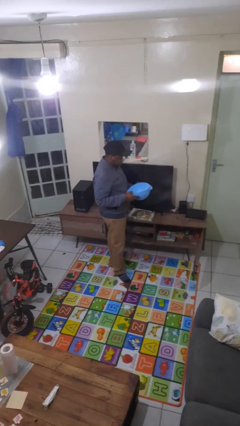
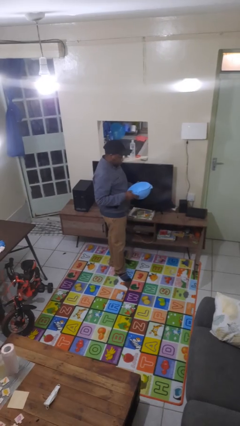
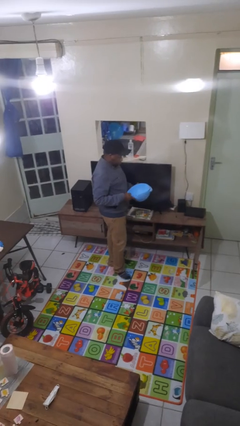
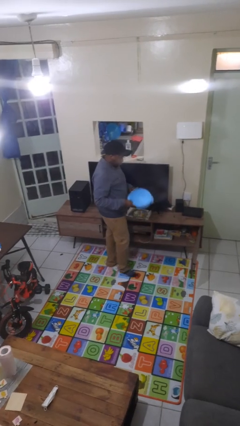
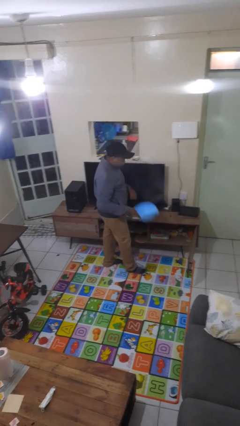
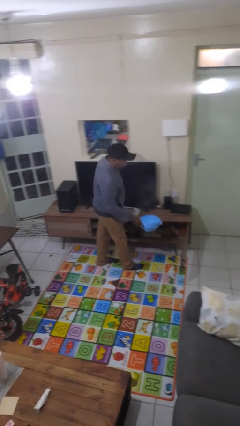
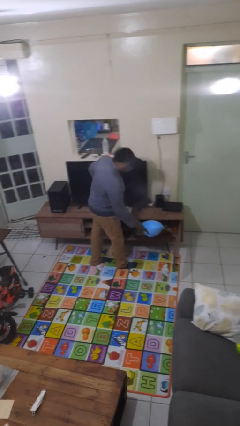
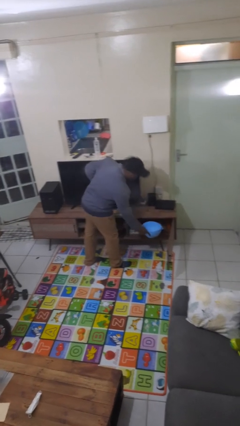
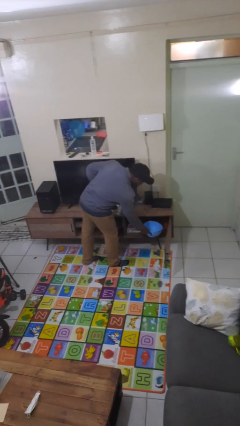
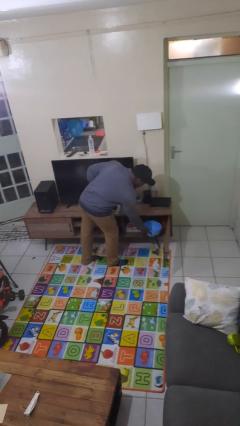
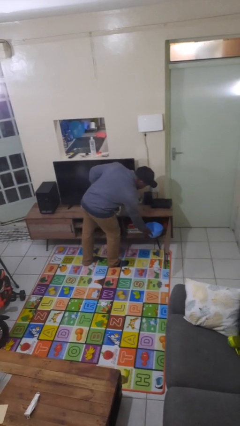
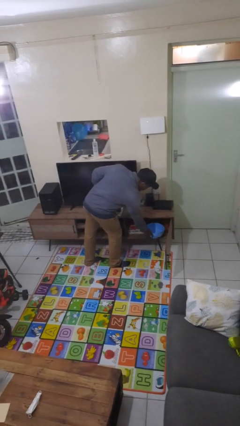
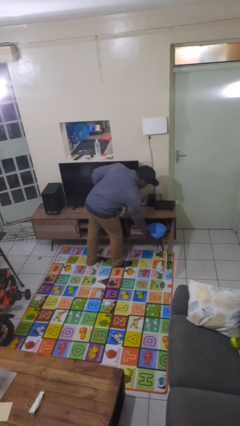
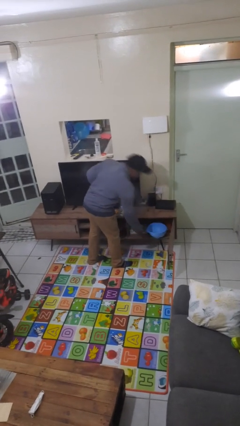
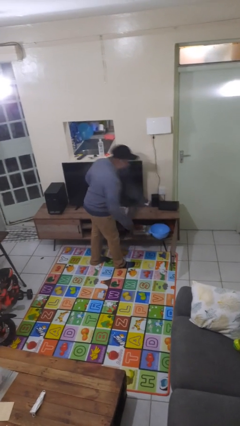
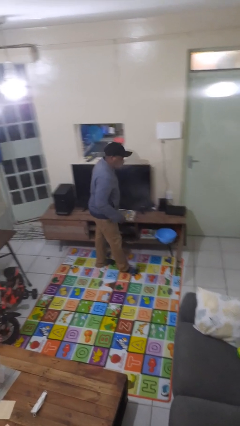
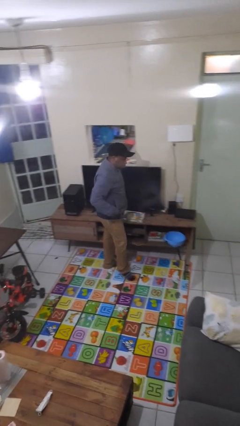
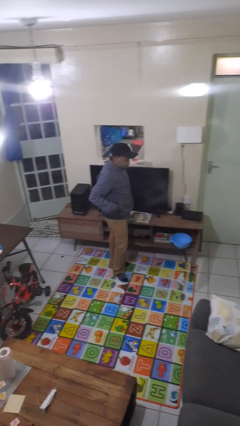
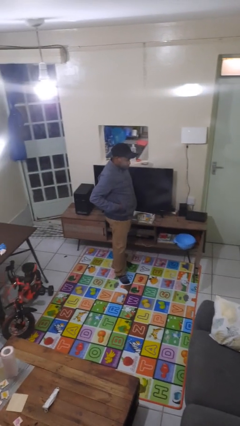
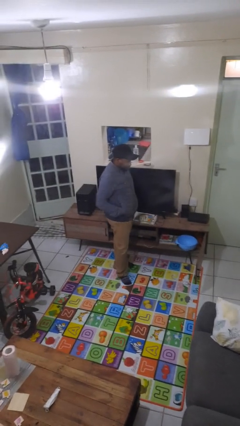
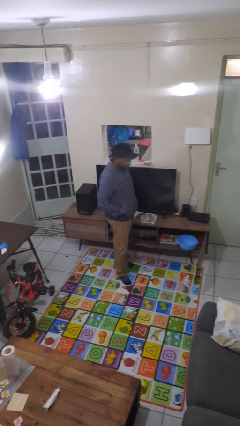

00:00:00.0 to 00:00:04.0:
person puts down object into cabinet

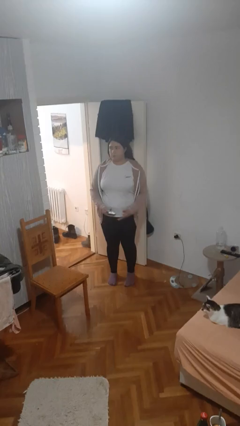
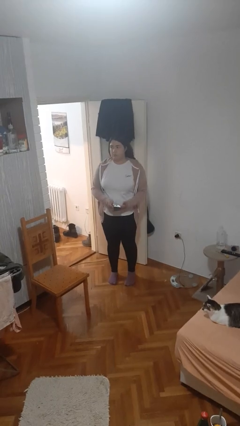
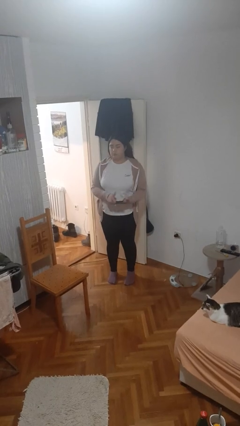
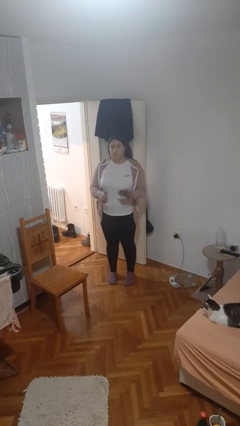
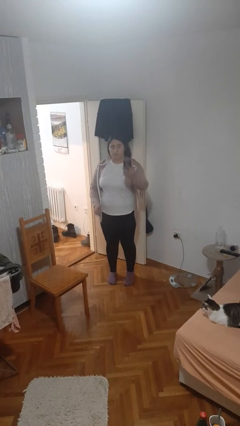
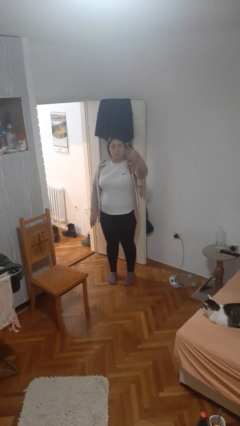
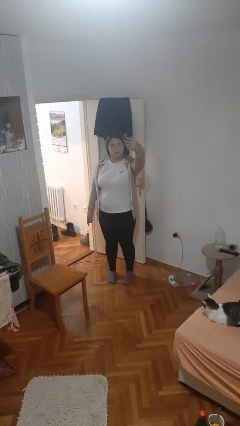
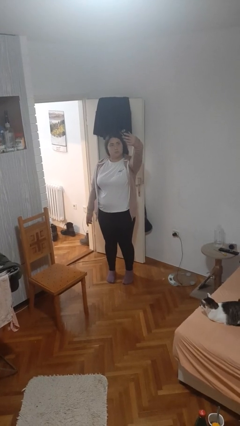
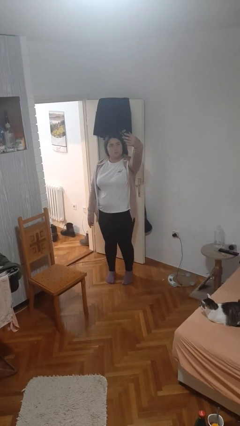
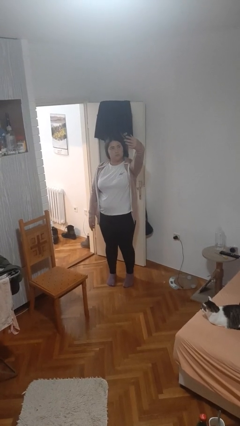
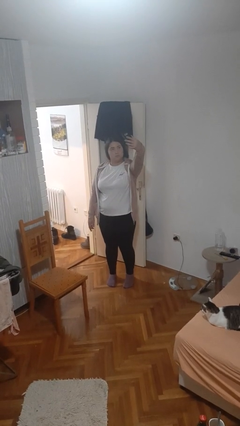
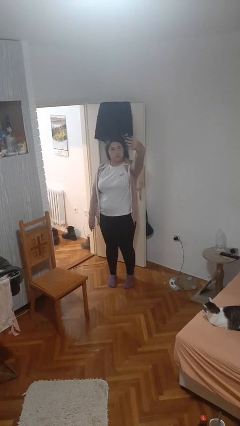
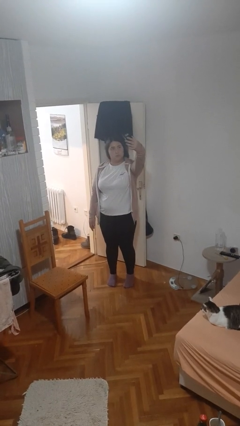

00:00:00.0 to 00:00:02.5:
person takes selfie

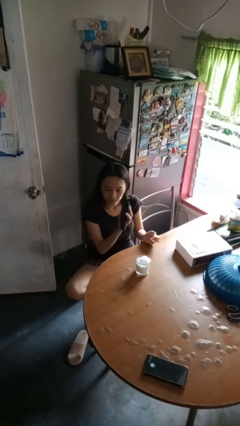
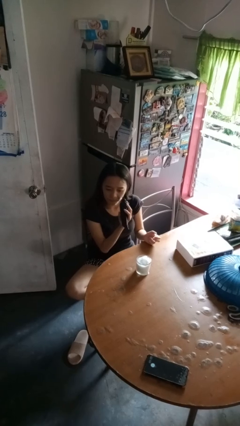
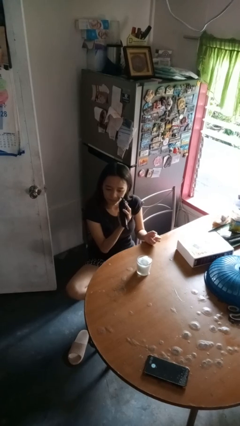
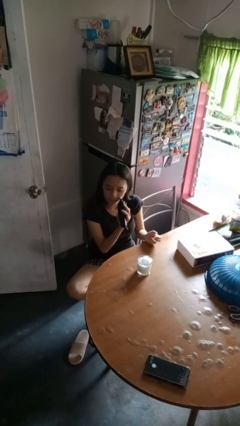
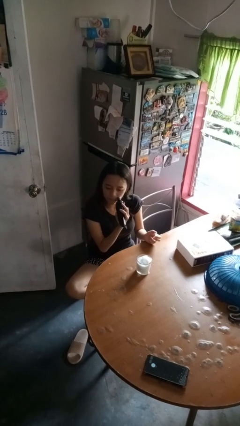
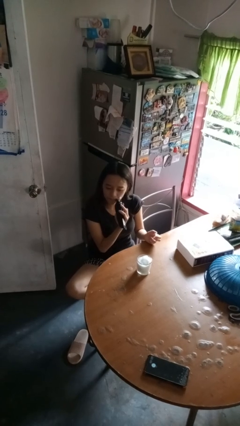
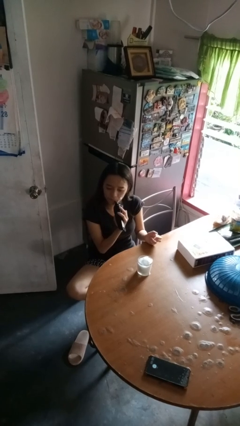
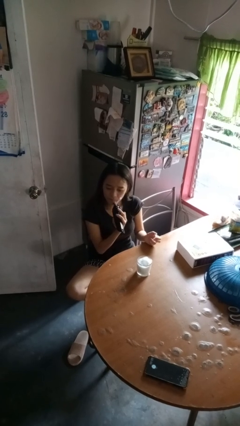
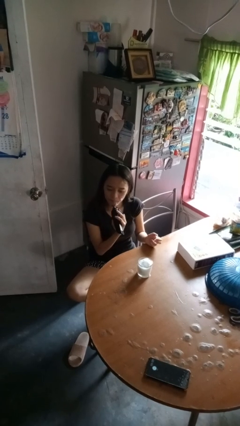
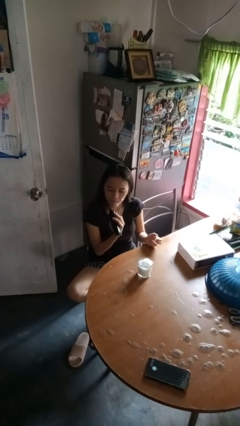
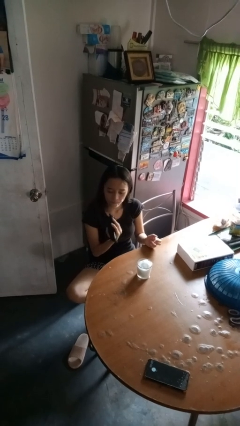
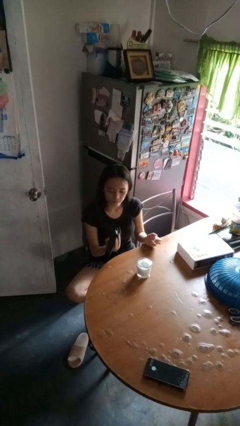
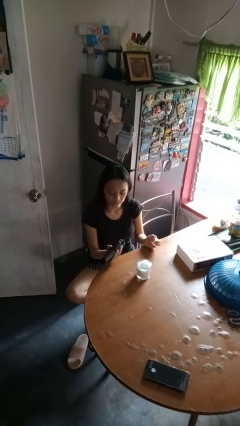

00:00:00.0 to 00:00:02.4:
person shaves face

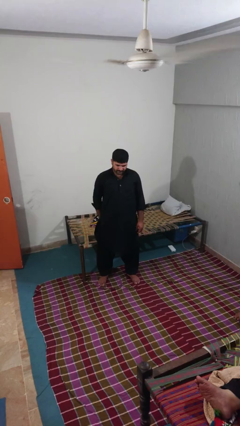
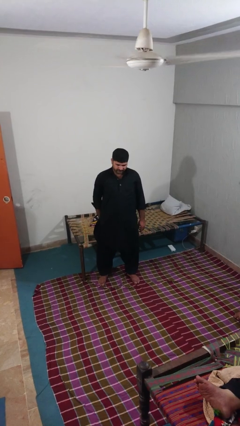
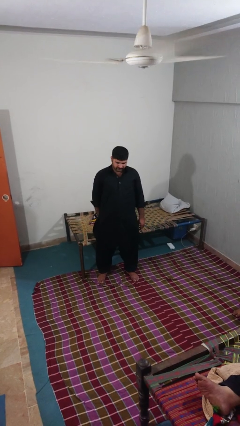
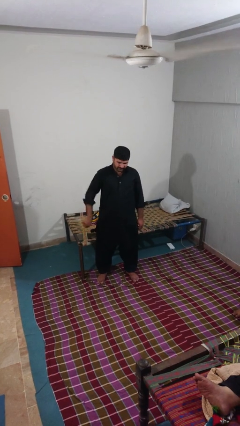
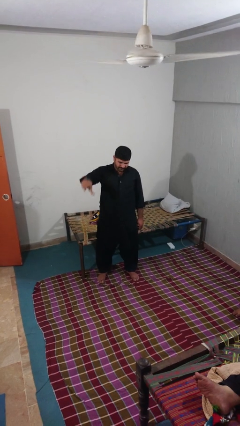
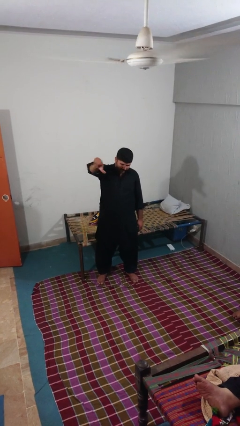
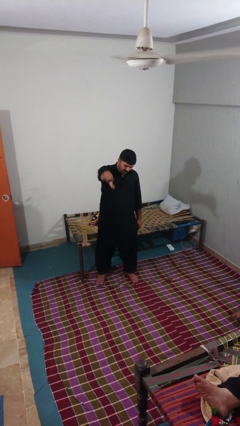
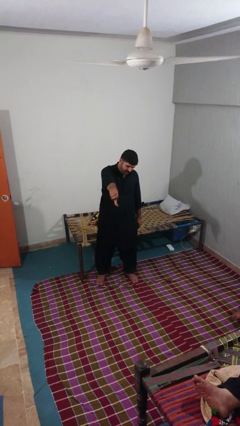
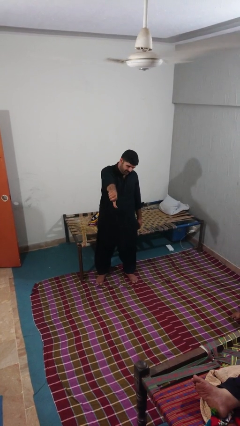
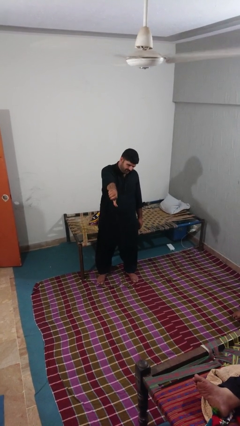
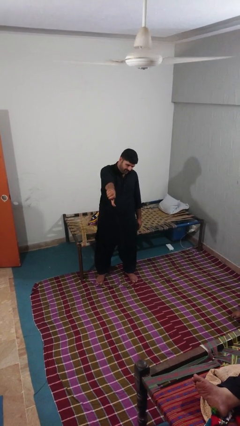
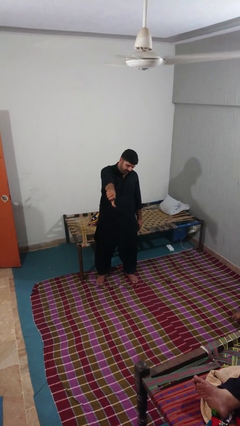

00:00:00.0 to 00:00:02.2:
person gestures thumbs down

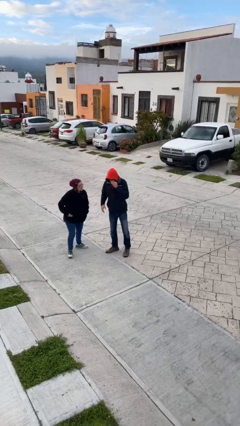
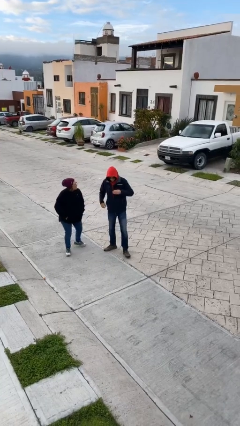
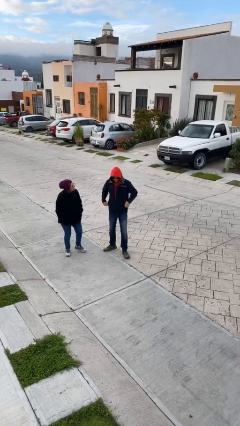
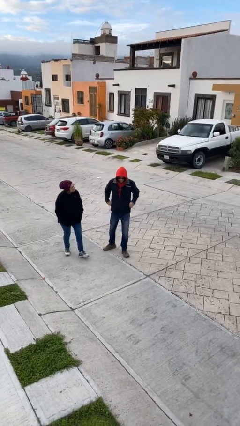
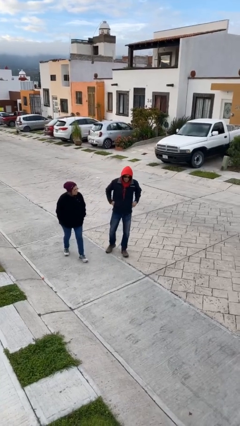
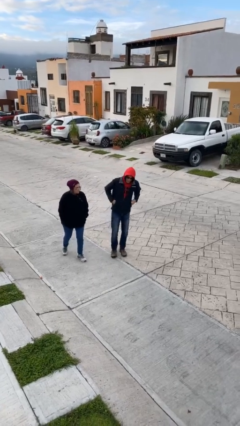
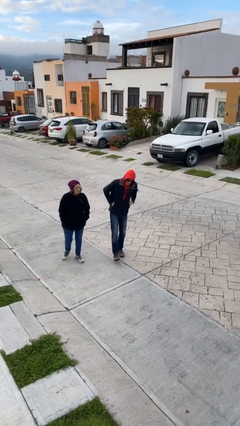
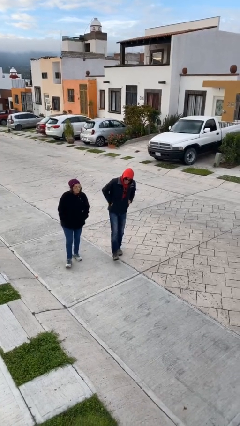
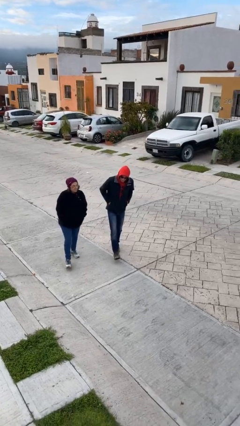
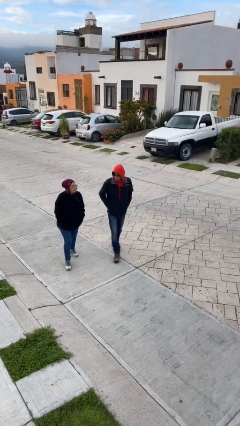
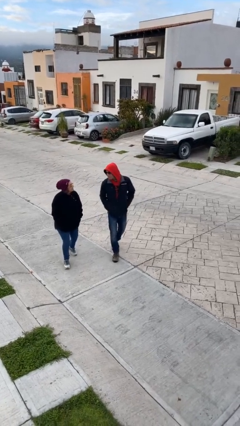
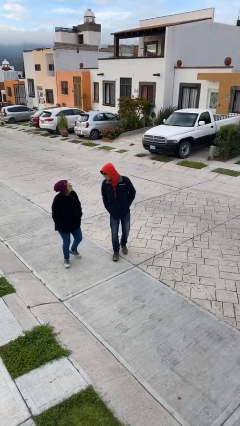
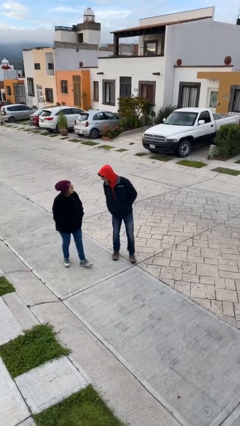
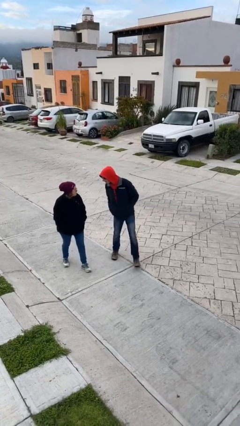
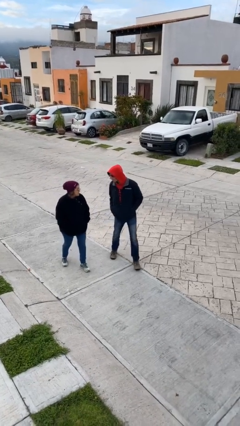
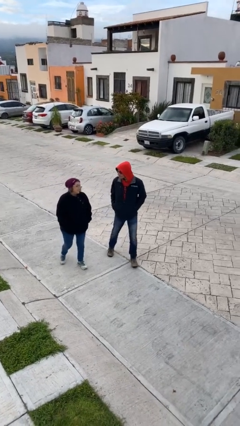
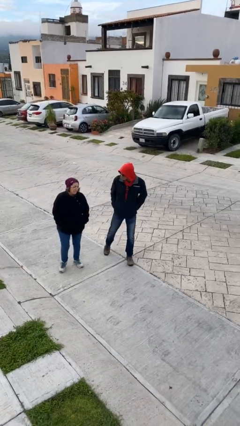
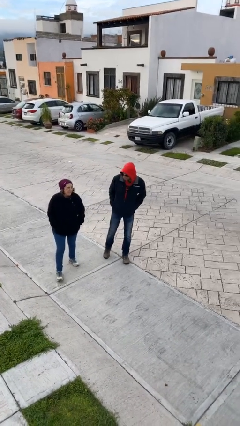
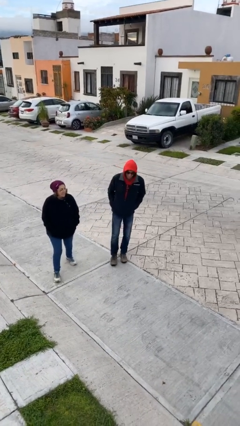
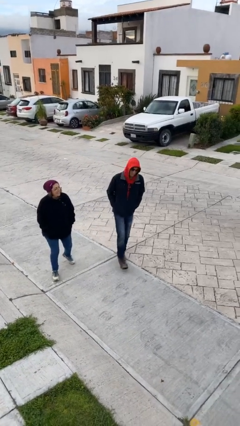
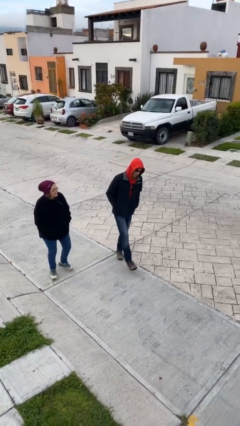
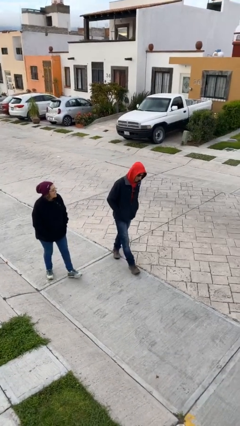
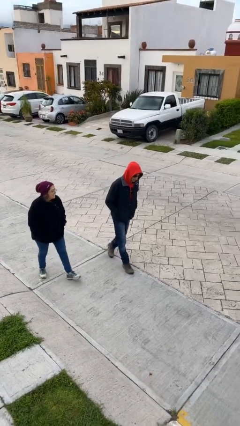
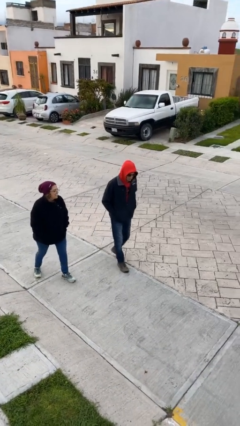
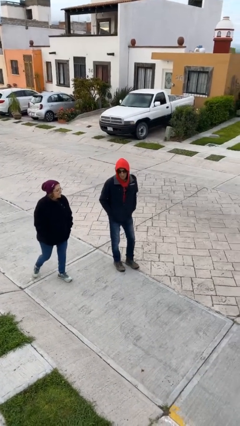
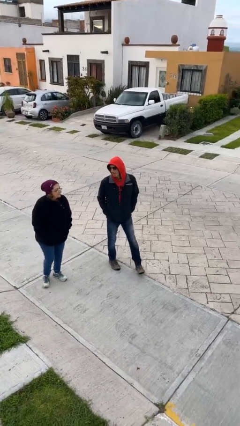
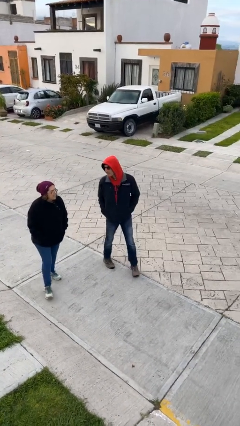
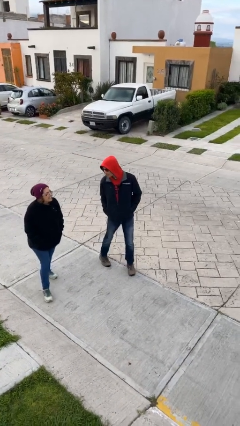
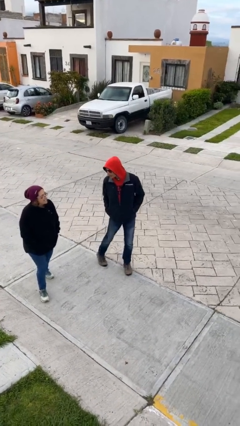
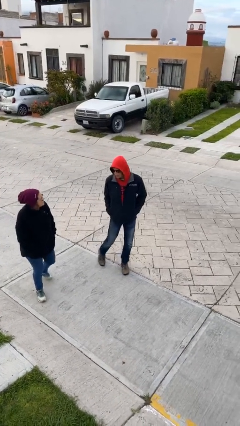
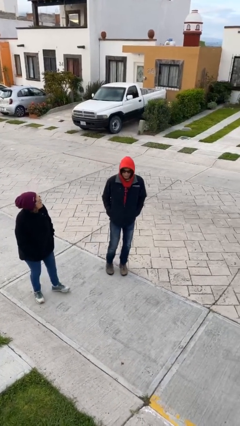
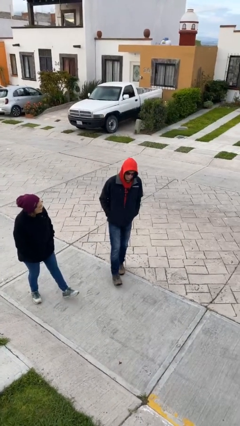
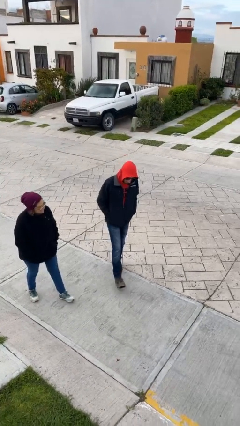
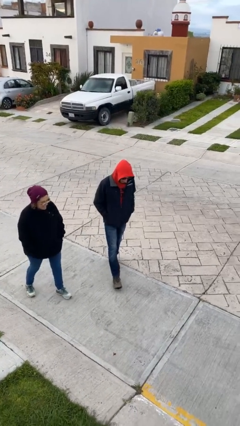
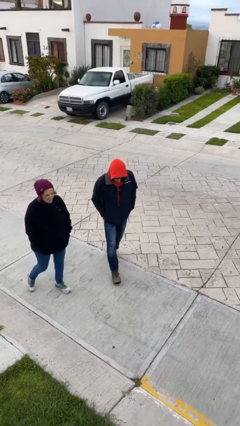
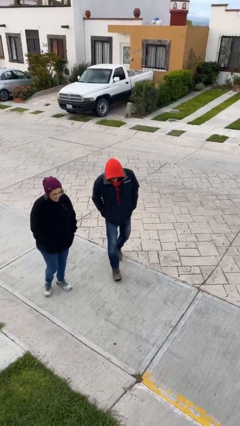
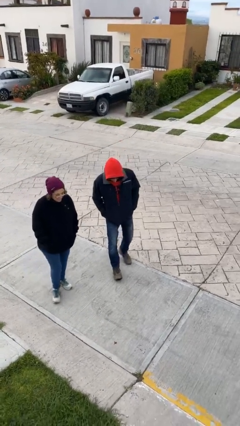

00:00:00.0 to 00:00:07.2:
person talks to person
